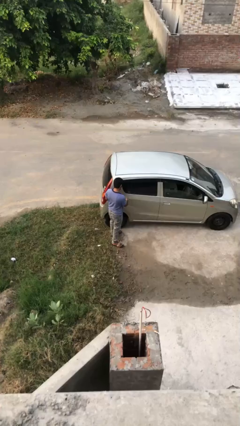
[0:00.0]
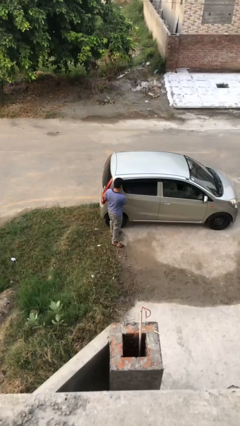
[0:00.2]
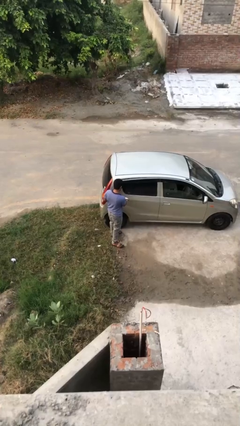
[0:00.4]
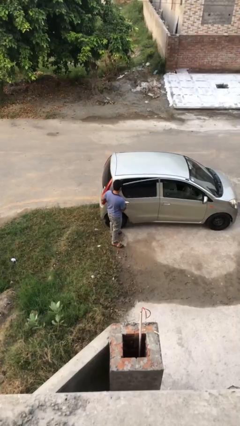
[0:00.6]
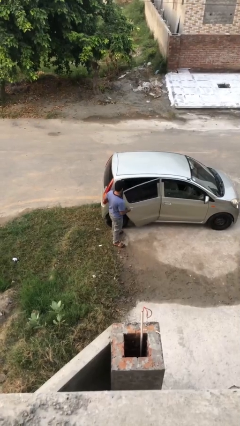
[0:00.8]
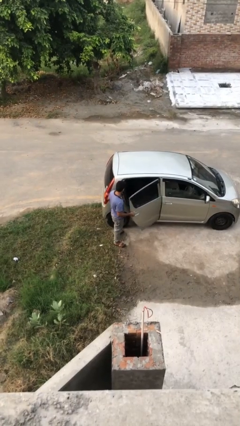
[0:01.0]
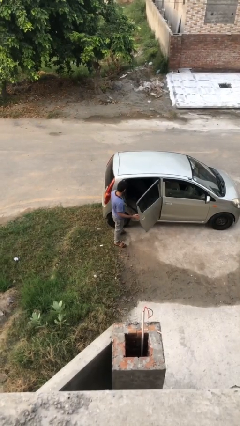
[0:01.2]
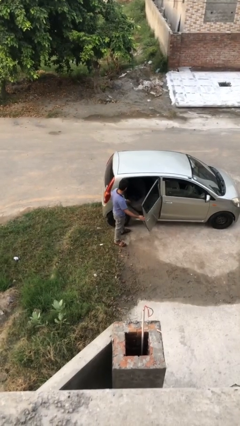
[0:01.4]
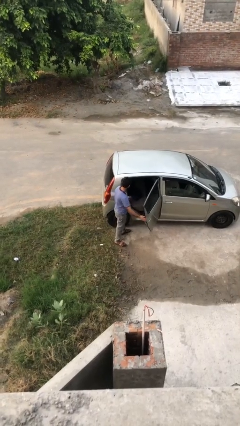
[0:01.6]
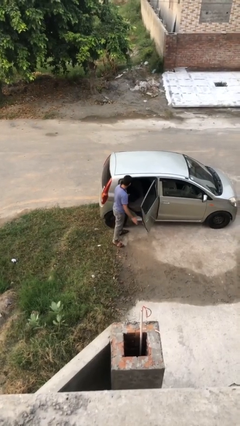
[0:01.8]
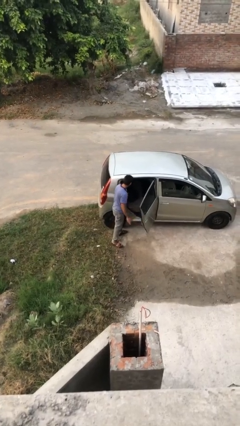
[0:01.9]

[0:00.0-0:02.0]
person opens car door

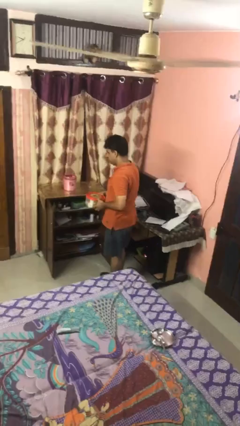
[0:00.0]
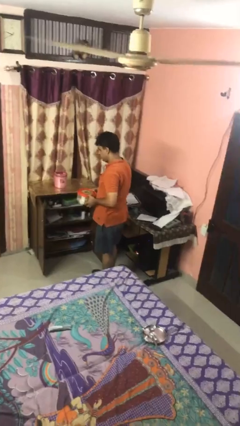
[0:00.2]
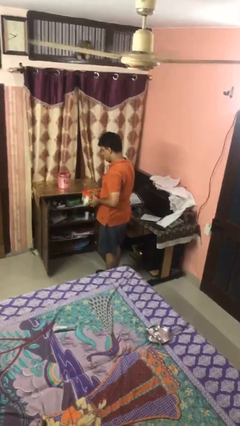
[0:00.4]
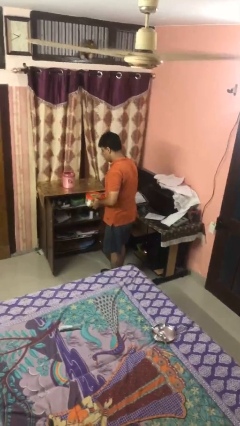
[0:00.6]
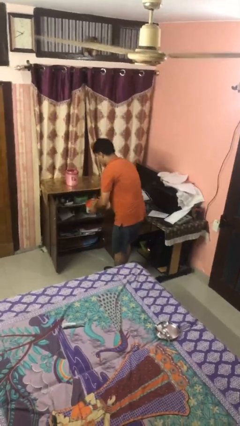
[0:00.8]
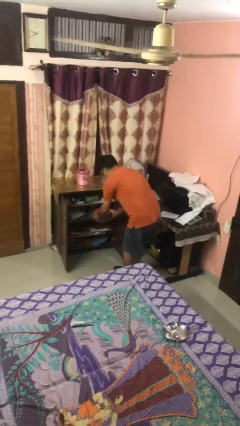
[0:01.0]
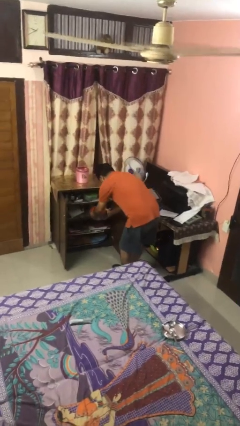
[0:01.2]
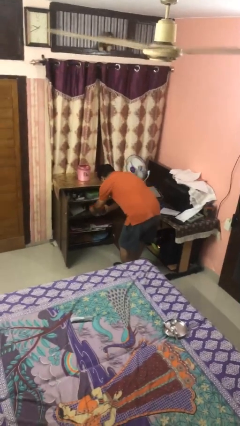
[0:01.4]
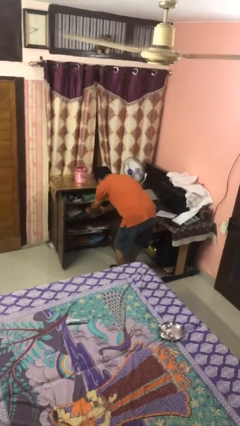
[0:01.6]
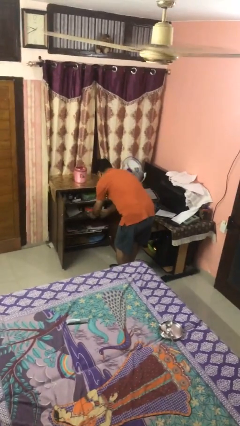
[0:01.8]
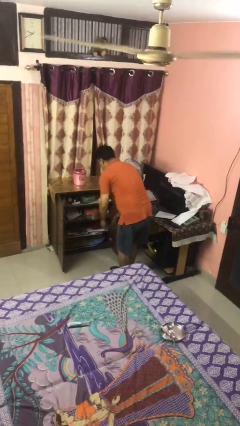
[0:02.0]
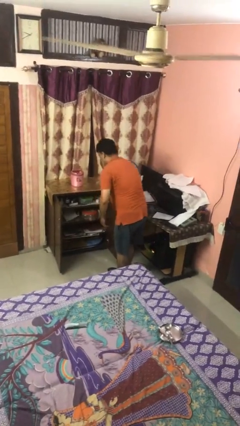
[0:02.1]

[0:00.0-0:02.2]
person puts down object into cabinet

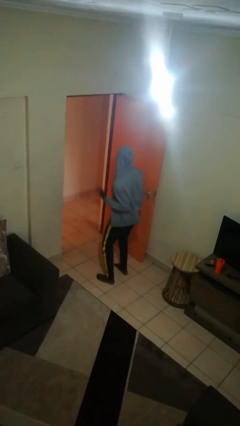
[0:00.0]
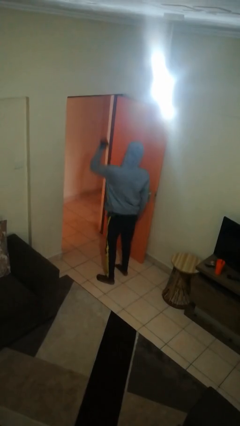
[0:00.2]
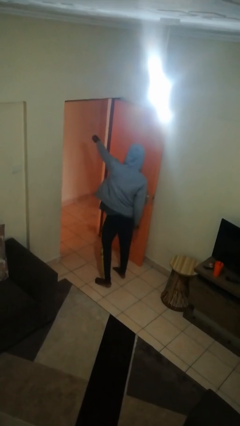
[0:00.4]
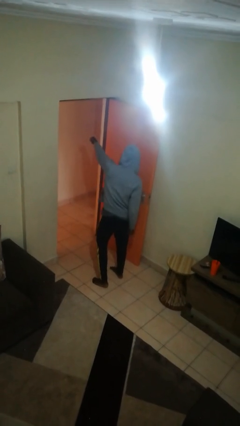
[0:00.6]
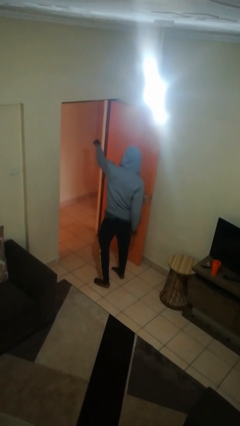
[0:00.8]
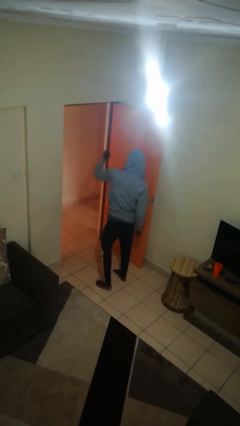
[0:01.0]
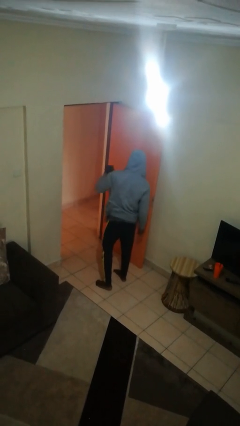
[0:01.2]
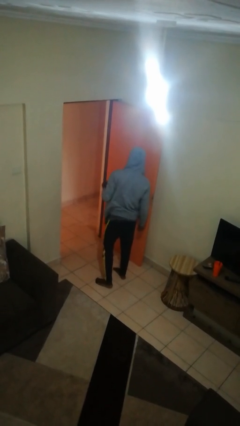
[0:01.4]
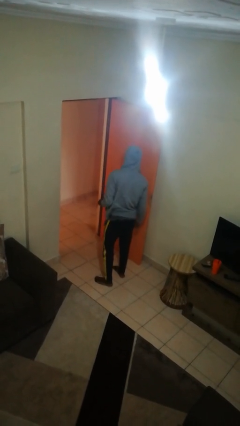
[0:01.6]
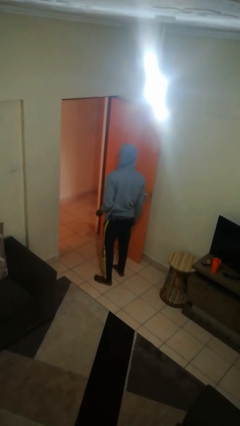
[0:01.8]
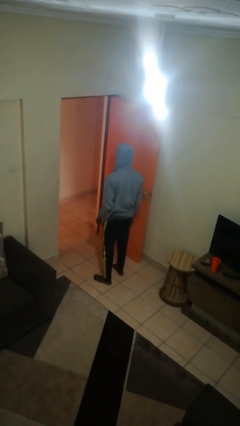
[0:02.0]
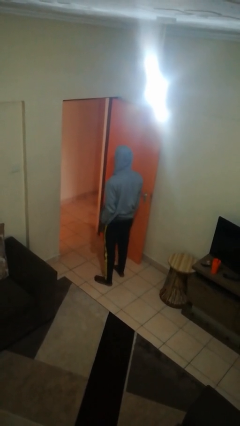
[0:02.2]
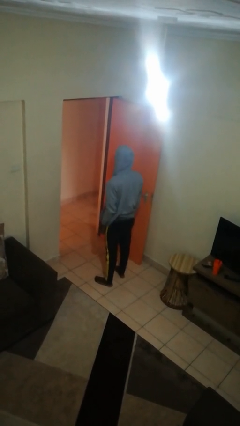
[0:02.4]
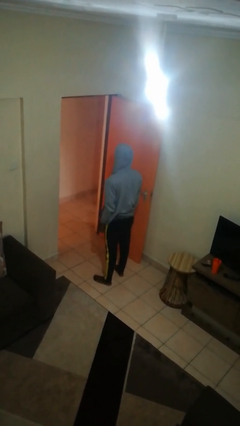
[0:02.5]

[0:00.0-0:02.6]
person punches

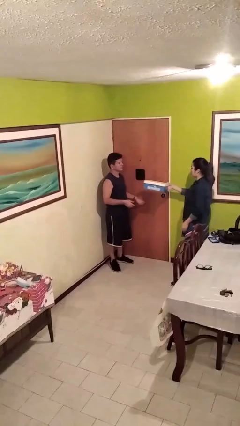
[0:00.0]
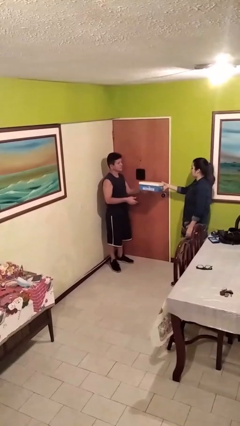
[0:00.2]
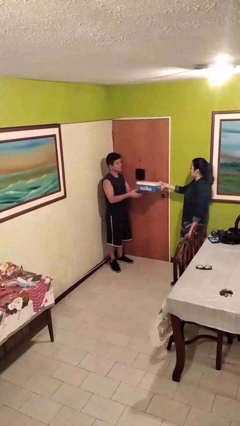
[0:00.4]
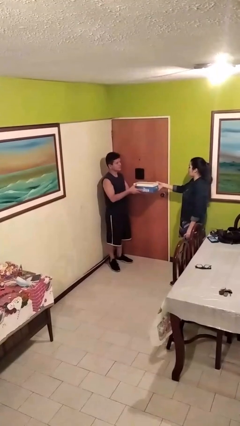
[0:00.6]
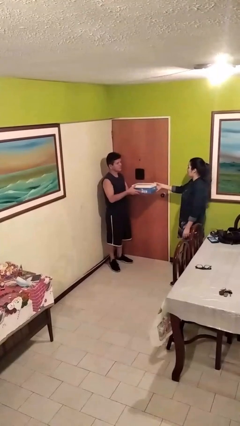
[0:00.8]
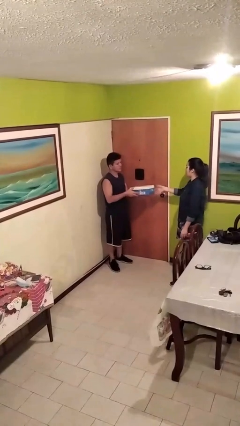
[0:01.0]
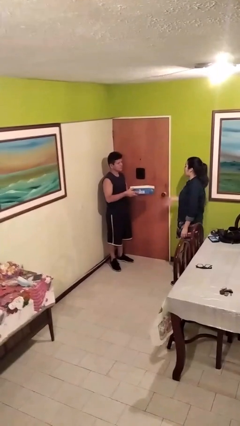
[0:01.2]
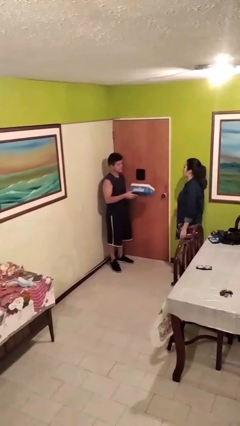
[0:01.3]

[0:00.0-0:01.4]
person transfers object to person

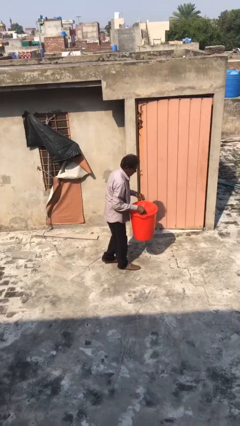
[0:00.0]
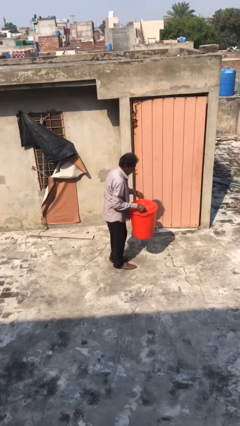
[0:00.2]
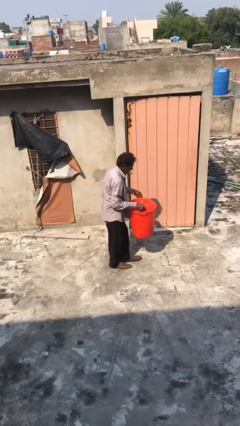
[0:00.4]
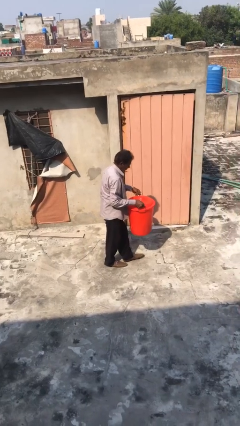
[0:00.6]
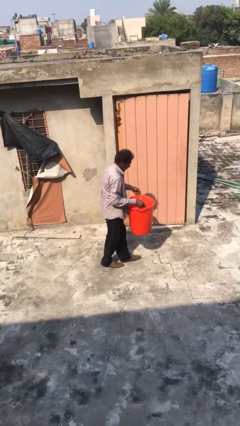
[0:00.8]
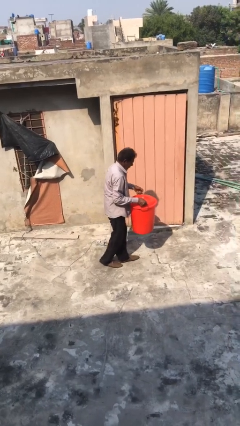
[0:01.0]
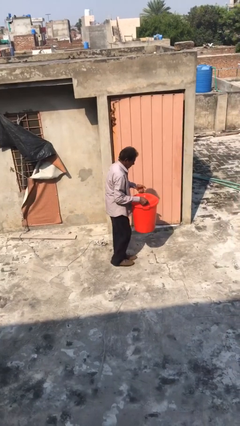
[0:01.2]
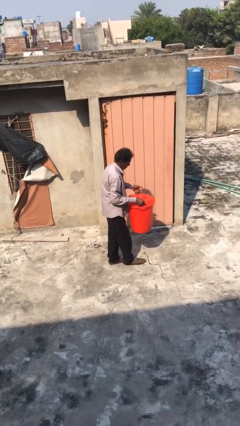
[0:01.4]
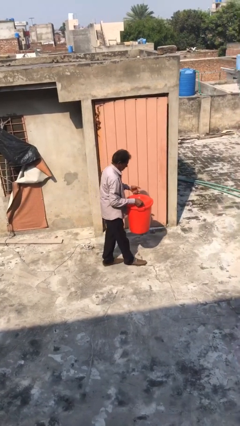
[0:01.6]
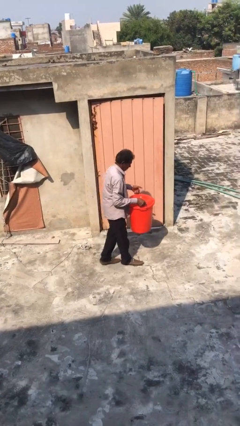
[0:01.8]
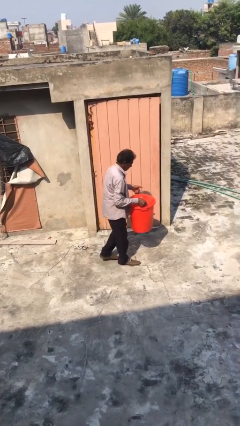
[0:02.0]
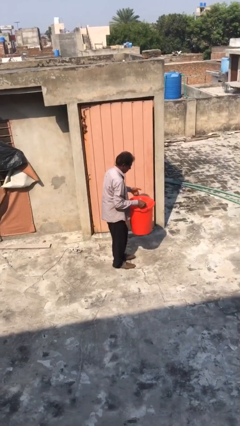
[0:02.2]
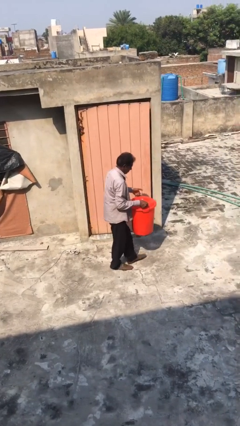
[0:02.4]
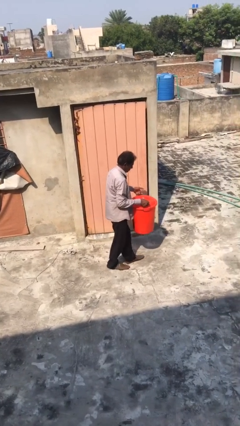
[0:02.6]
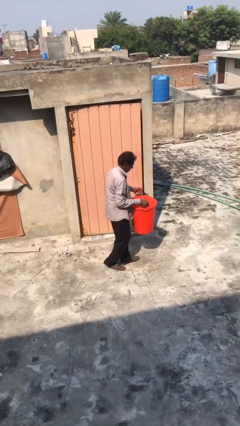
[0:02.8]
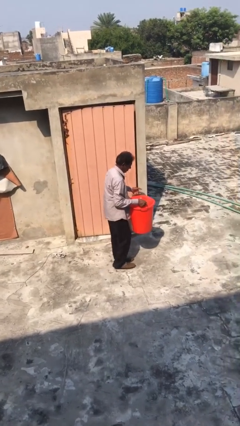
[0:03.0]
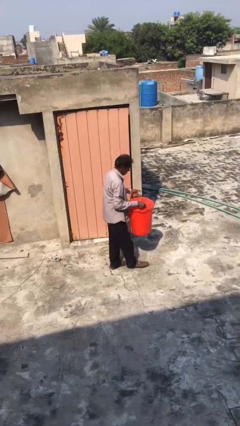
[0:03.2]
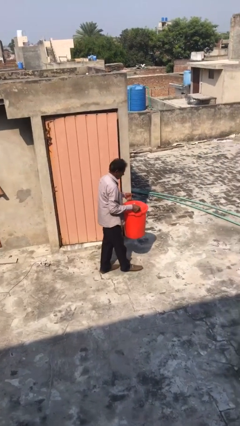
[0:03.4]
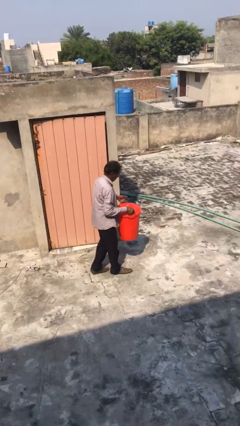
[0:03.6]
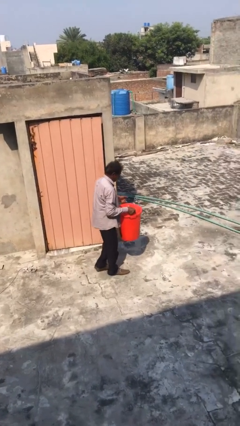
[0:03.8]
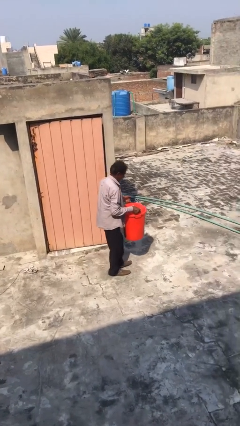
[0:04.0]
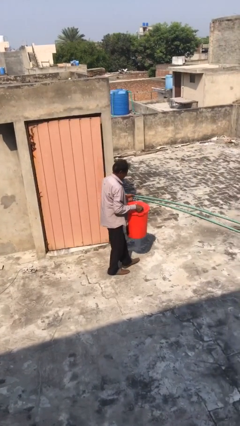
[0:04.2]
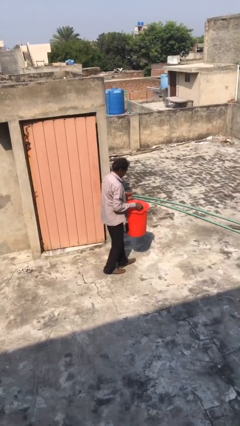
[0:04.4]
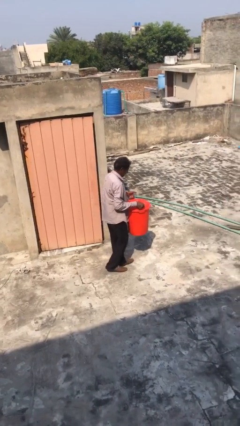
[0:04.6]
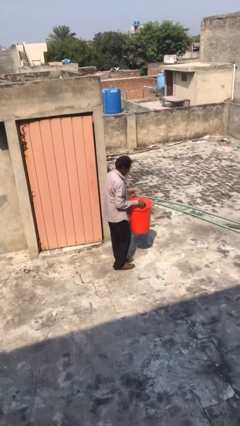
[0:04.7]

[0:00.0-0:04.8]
person carries heavy object

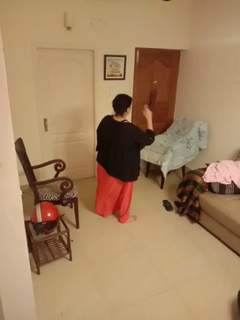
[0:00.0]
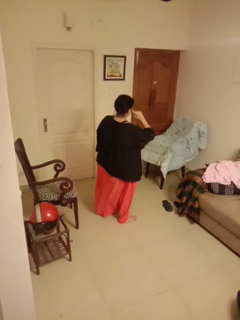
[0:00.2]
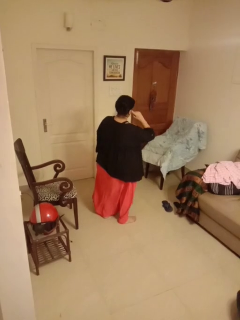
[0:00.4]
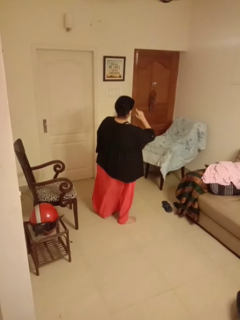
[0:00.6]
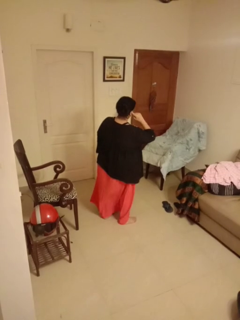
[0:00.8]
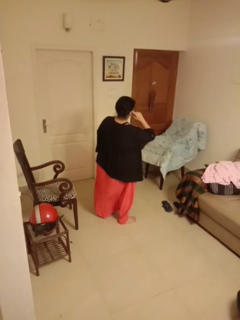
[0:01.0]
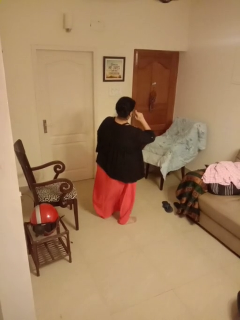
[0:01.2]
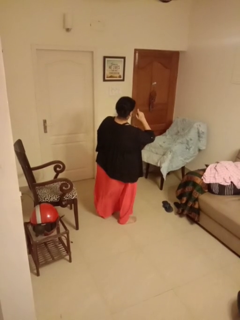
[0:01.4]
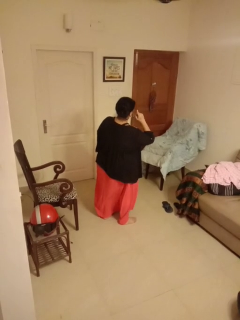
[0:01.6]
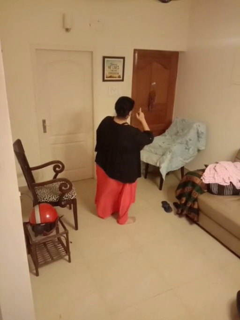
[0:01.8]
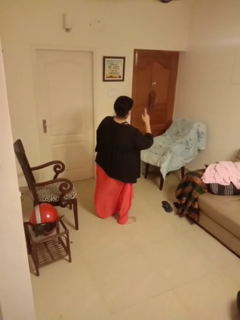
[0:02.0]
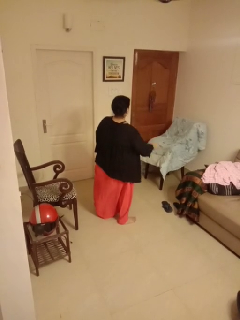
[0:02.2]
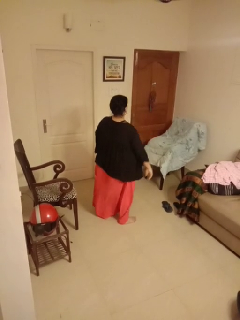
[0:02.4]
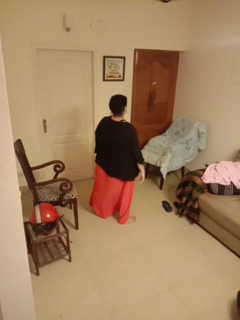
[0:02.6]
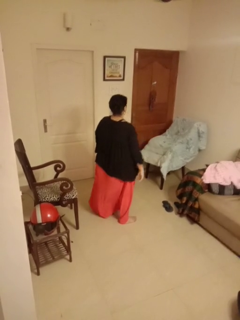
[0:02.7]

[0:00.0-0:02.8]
person gestures listen closely

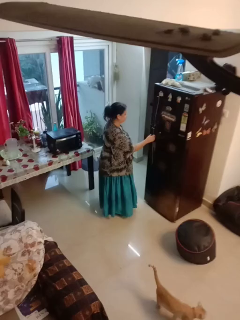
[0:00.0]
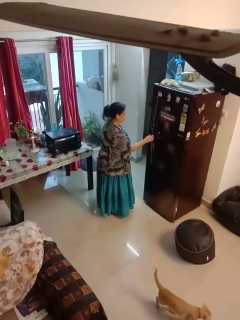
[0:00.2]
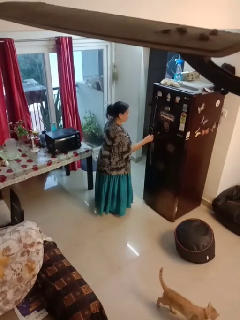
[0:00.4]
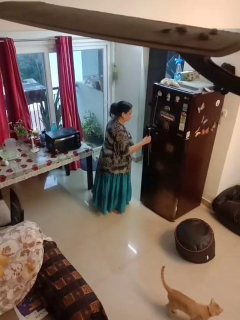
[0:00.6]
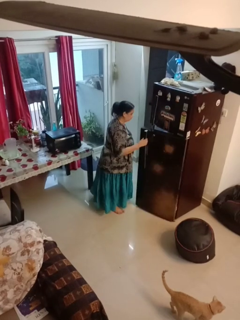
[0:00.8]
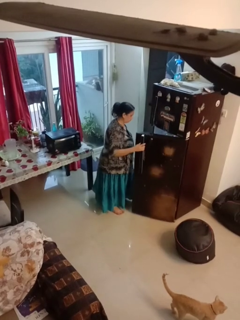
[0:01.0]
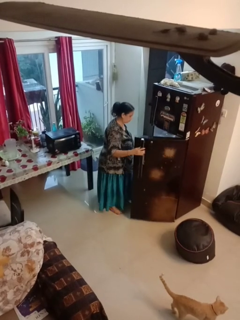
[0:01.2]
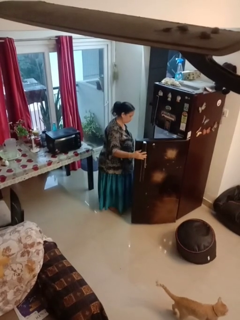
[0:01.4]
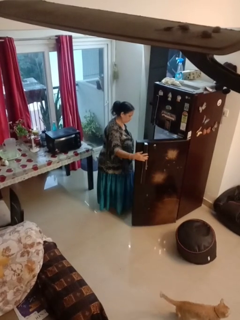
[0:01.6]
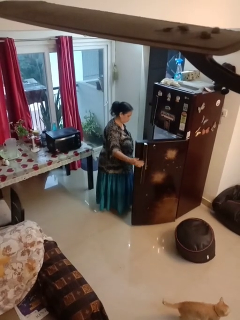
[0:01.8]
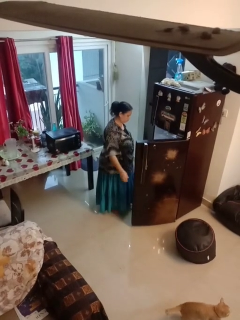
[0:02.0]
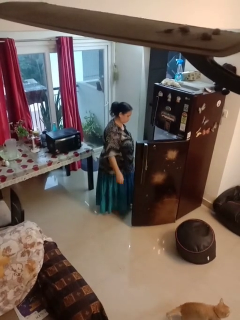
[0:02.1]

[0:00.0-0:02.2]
person opens refrigerator

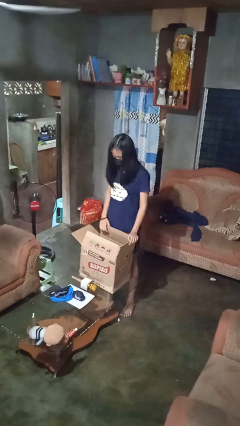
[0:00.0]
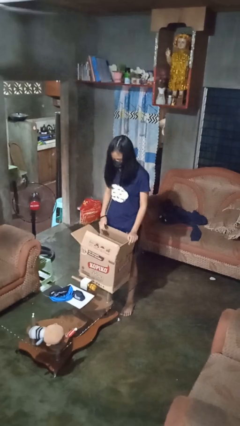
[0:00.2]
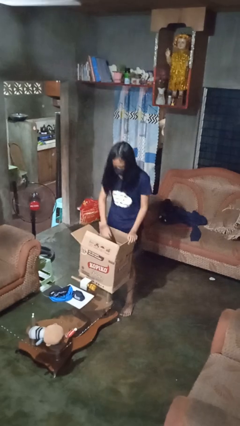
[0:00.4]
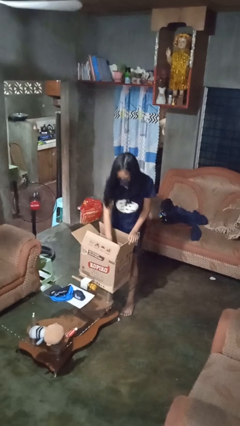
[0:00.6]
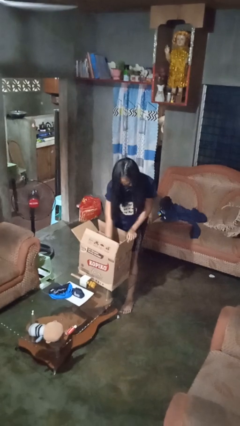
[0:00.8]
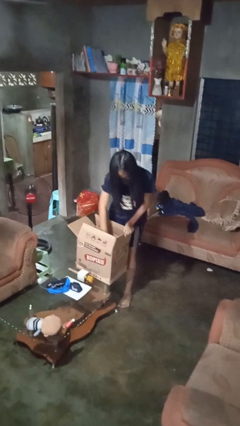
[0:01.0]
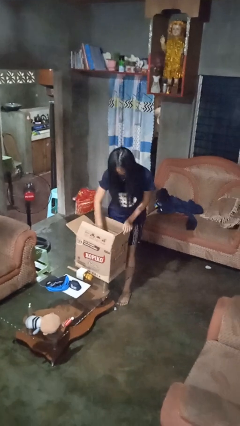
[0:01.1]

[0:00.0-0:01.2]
person searches in box
